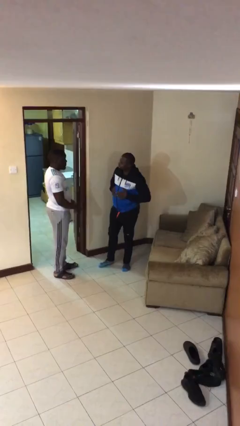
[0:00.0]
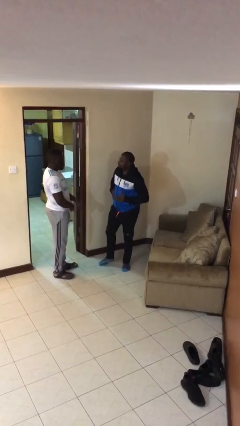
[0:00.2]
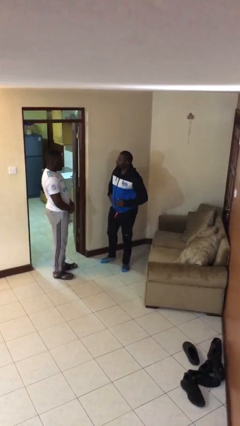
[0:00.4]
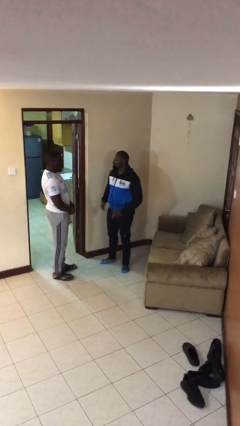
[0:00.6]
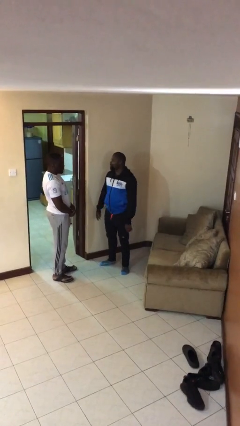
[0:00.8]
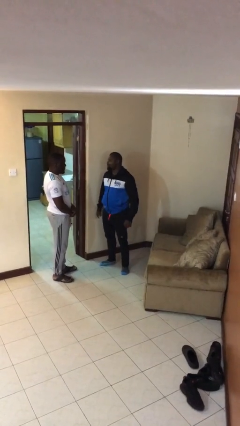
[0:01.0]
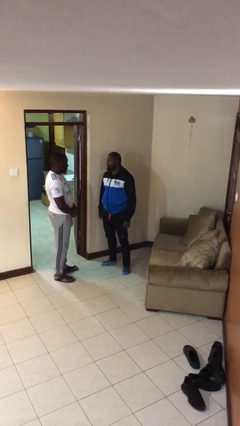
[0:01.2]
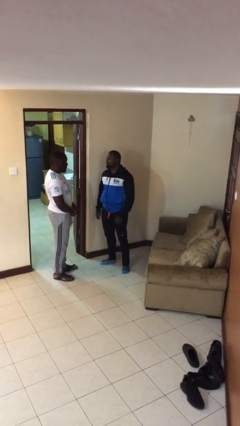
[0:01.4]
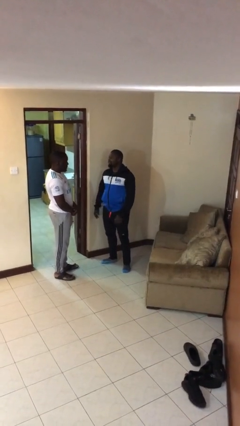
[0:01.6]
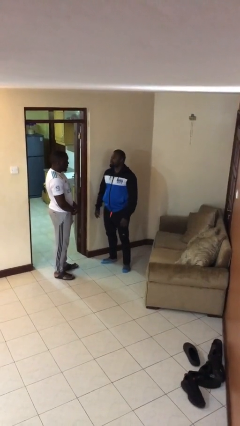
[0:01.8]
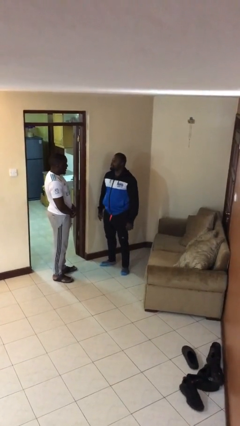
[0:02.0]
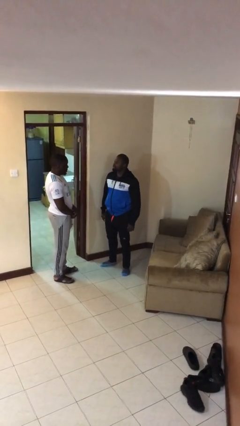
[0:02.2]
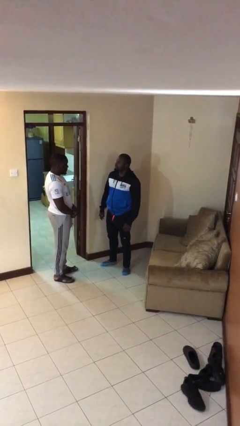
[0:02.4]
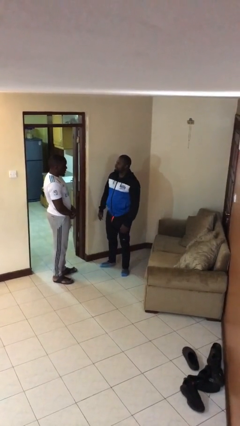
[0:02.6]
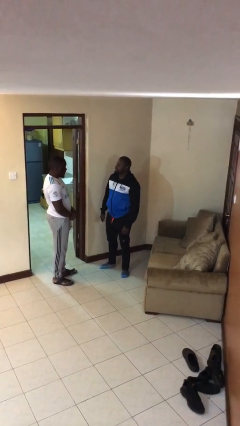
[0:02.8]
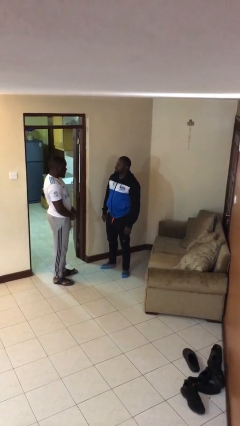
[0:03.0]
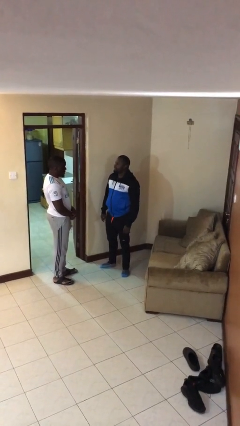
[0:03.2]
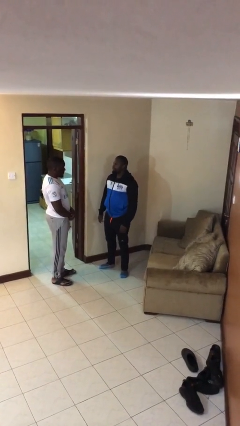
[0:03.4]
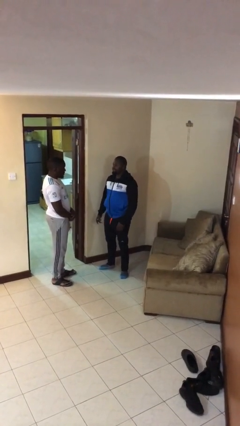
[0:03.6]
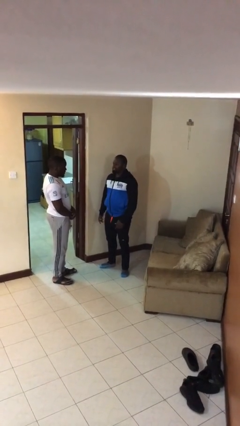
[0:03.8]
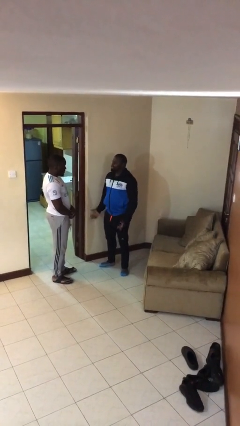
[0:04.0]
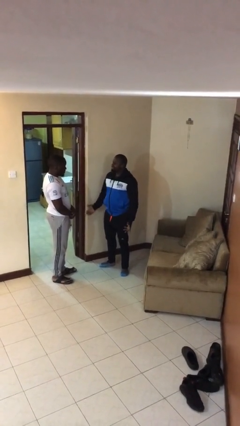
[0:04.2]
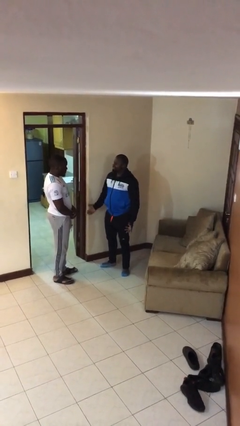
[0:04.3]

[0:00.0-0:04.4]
person talks to person

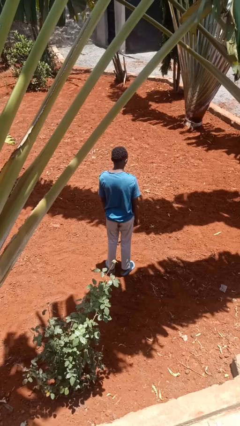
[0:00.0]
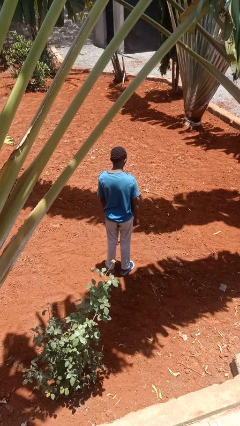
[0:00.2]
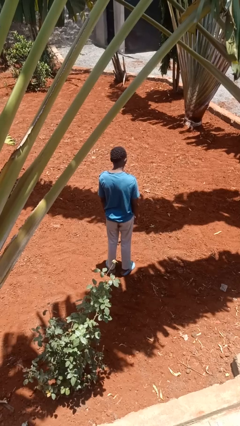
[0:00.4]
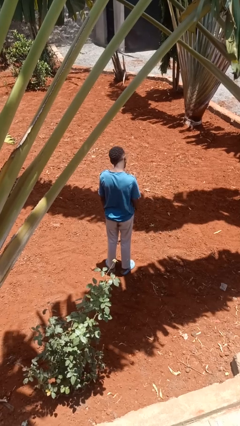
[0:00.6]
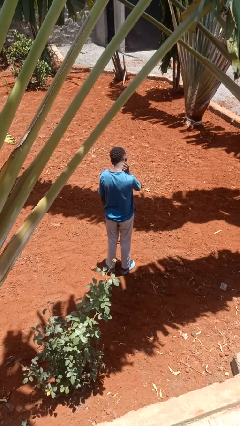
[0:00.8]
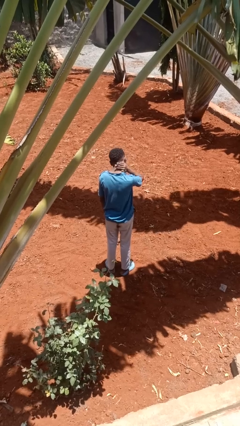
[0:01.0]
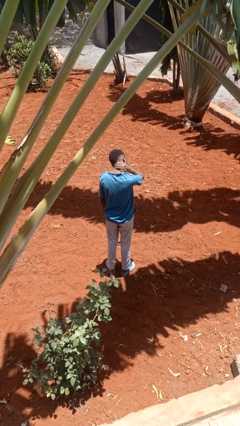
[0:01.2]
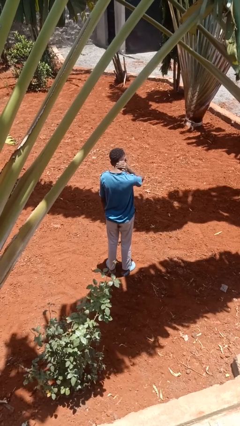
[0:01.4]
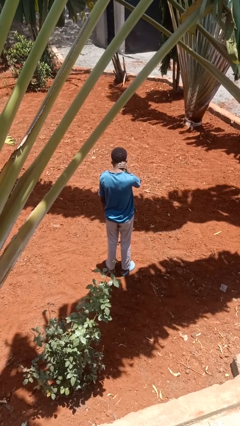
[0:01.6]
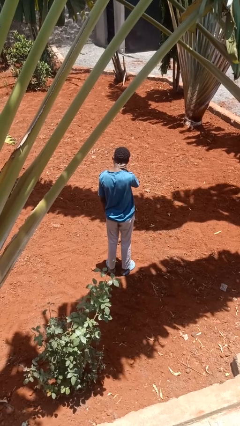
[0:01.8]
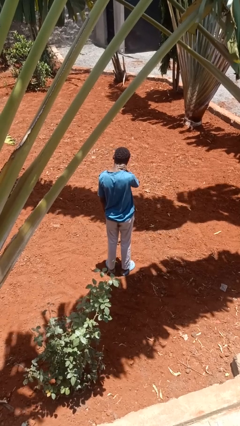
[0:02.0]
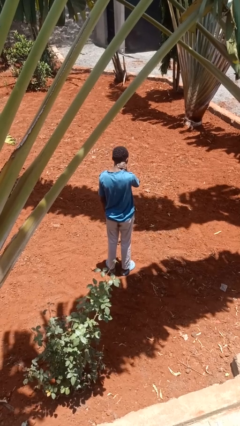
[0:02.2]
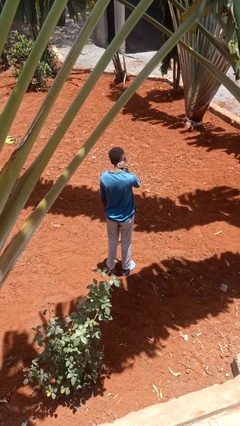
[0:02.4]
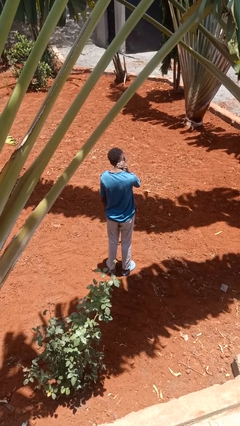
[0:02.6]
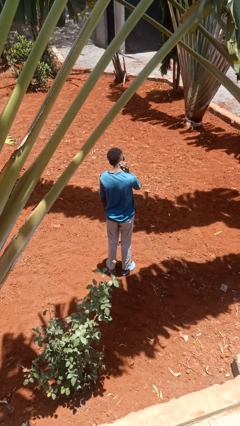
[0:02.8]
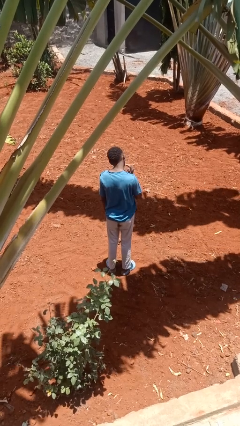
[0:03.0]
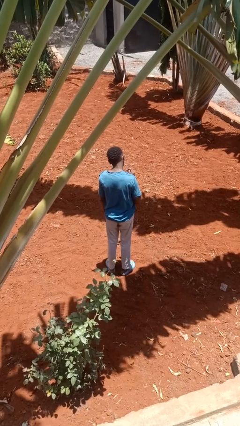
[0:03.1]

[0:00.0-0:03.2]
person rubs neck

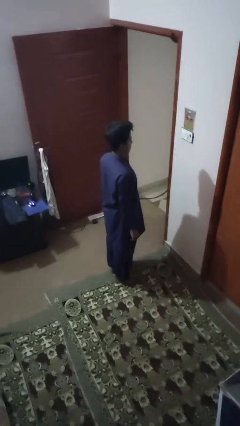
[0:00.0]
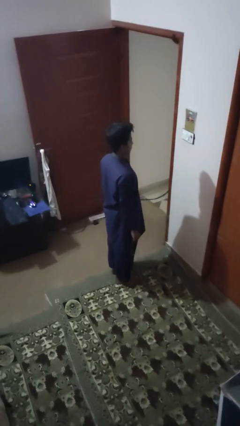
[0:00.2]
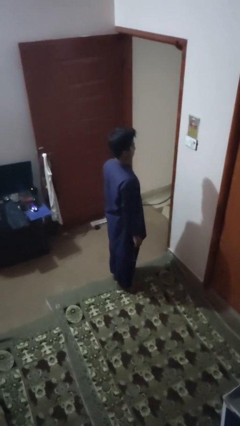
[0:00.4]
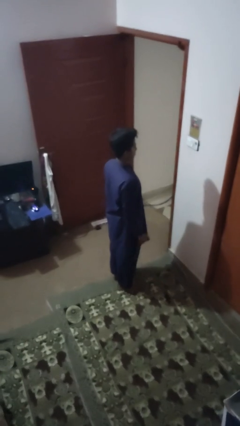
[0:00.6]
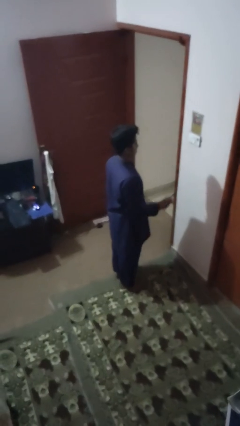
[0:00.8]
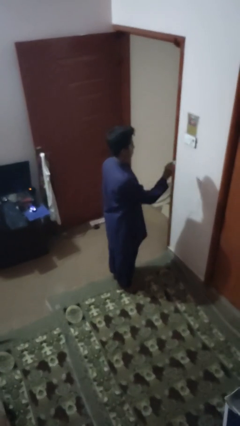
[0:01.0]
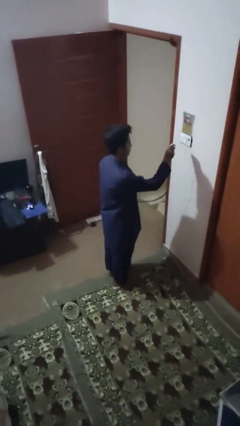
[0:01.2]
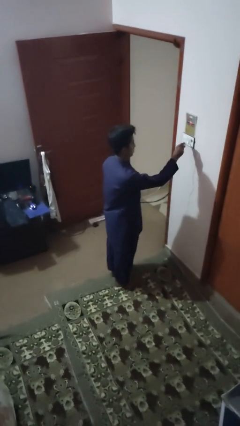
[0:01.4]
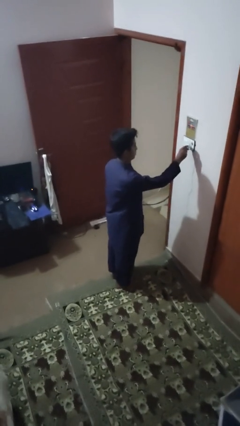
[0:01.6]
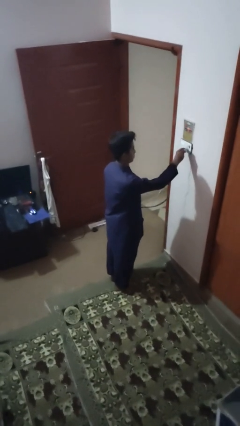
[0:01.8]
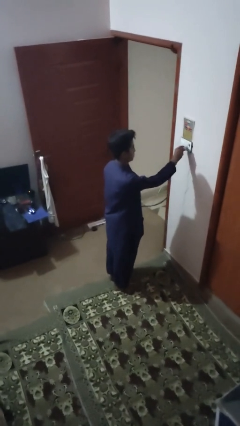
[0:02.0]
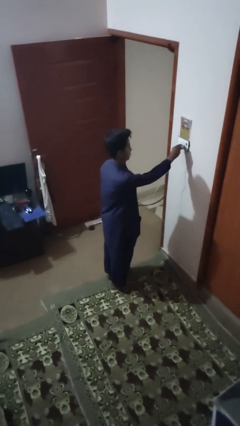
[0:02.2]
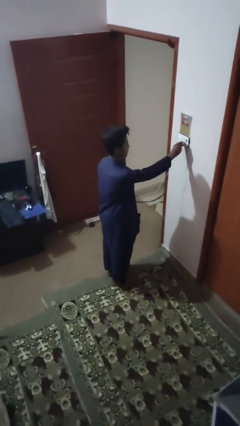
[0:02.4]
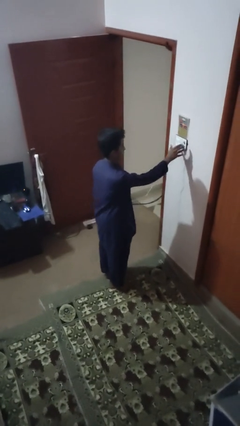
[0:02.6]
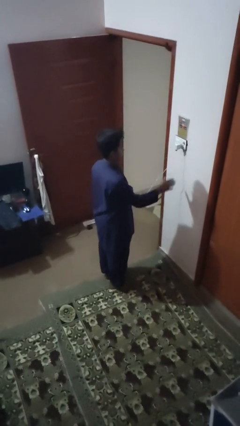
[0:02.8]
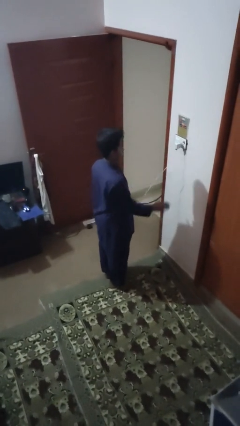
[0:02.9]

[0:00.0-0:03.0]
person plugs into electrical socket

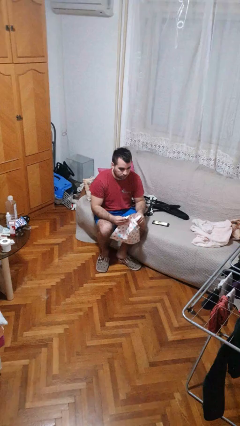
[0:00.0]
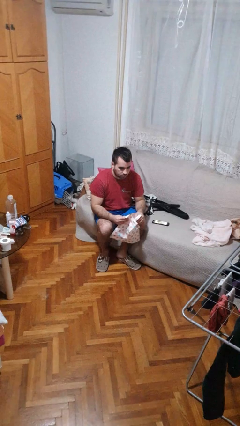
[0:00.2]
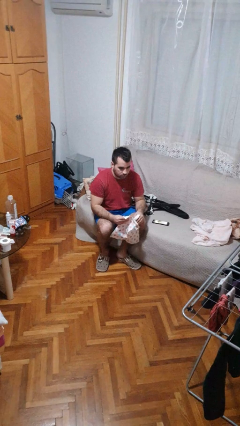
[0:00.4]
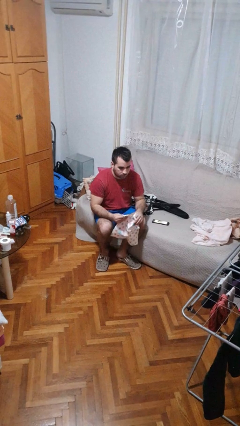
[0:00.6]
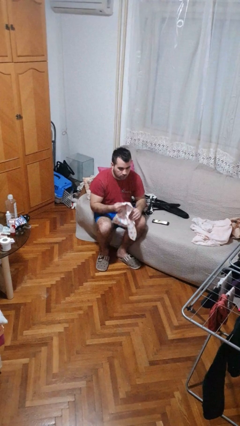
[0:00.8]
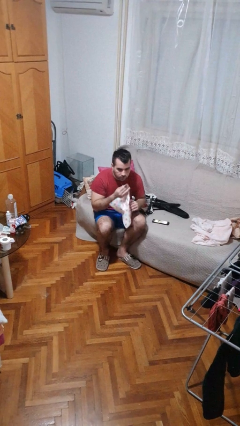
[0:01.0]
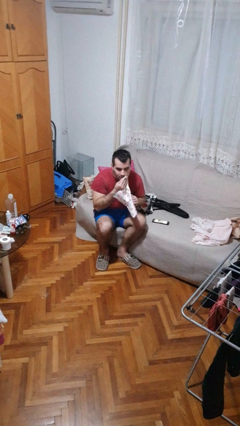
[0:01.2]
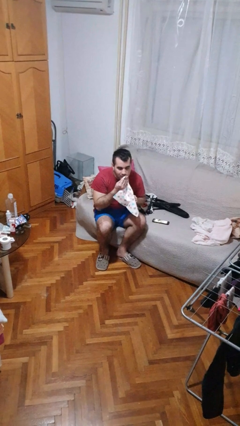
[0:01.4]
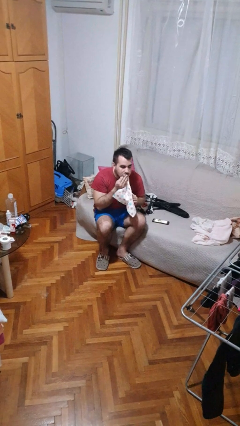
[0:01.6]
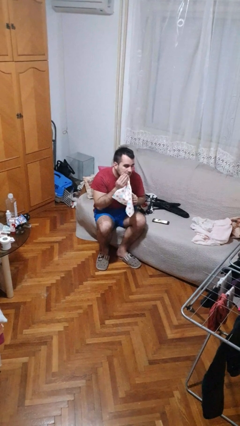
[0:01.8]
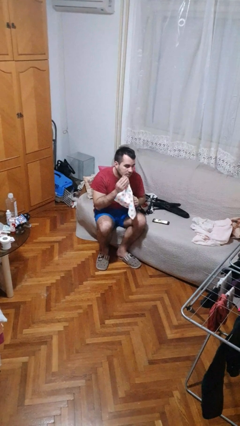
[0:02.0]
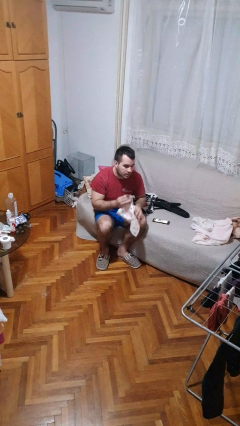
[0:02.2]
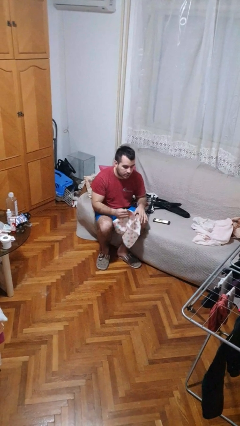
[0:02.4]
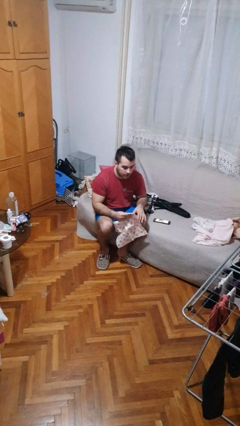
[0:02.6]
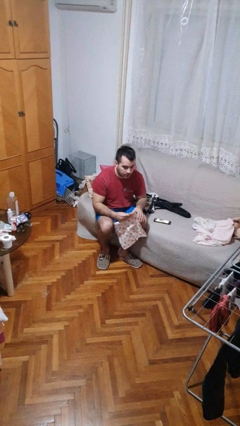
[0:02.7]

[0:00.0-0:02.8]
person wipes mouth with napkin

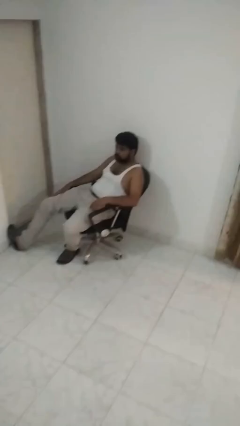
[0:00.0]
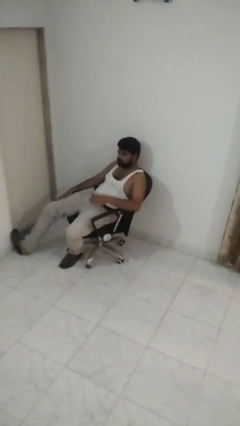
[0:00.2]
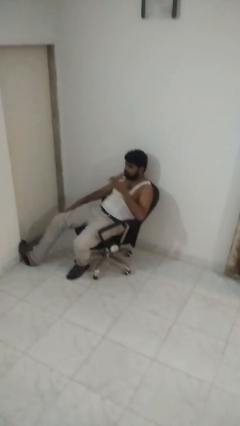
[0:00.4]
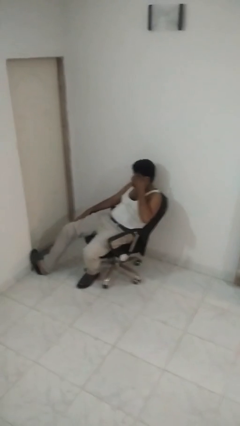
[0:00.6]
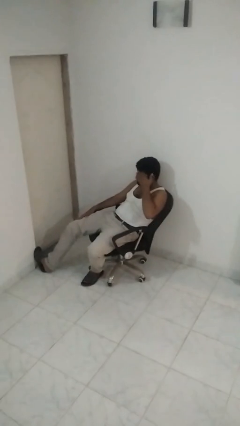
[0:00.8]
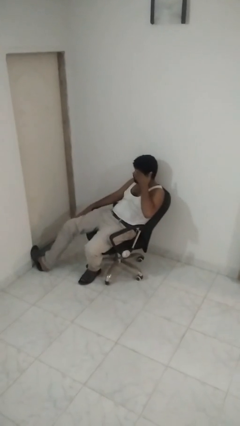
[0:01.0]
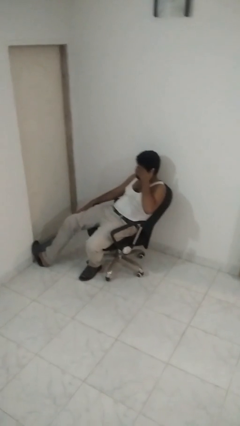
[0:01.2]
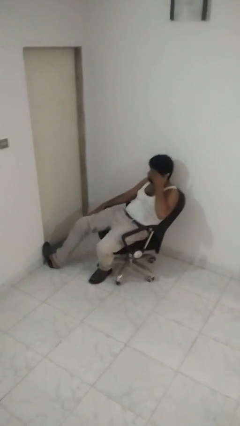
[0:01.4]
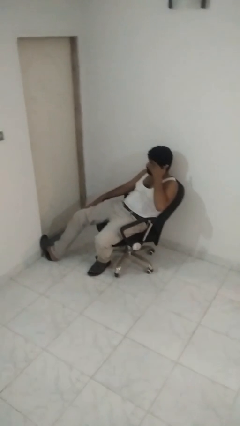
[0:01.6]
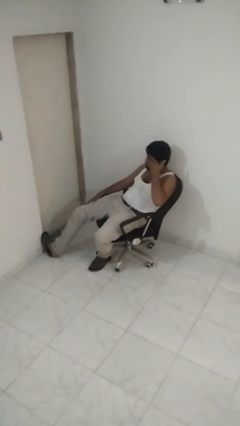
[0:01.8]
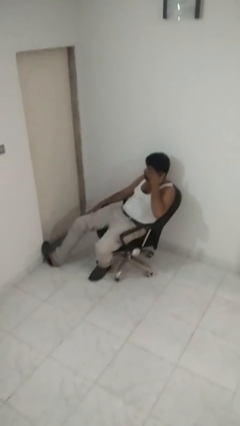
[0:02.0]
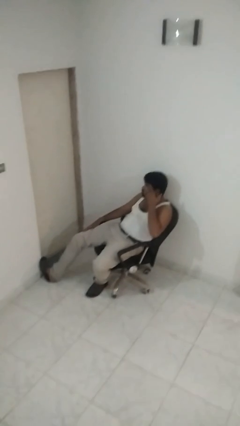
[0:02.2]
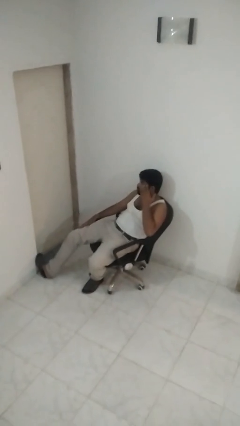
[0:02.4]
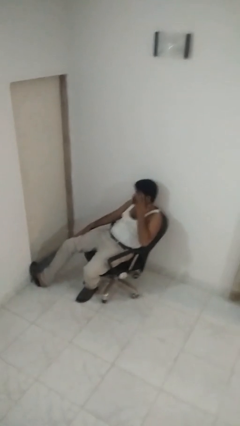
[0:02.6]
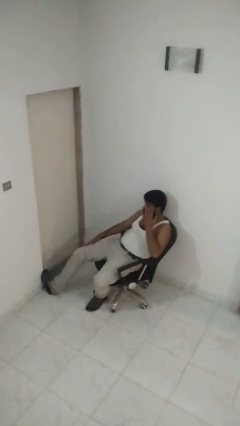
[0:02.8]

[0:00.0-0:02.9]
person scratches face

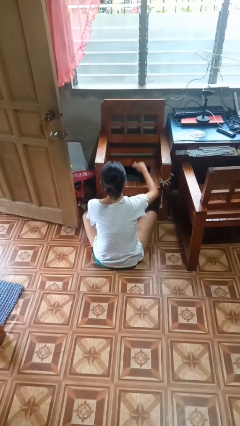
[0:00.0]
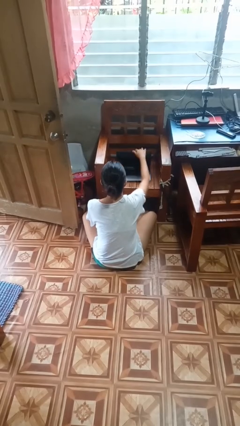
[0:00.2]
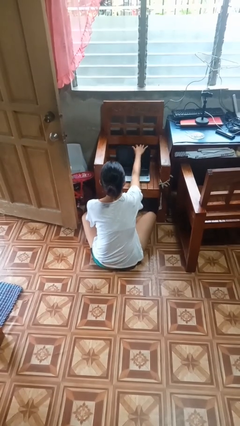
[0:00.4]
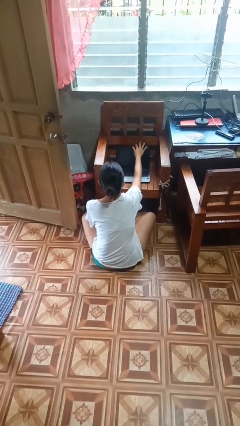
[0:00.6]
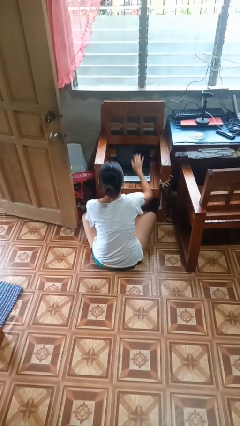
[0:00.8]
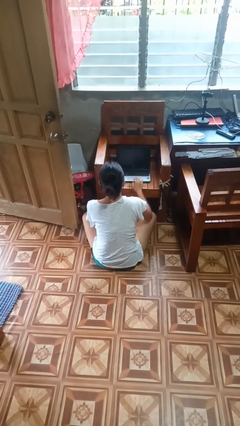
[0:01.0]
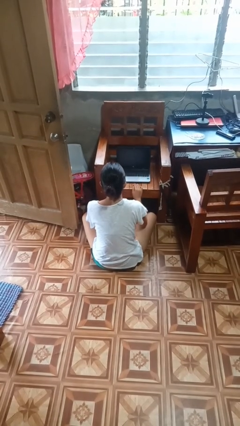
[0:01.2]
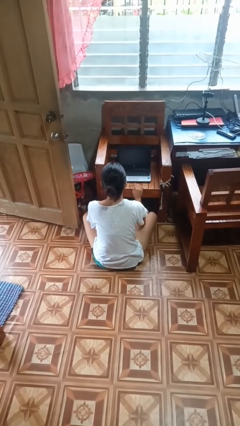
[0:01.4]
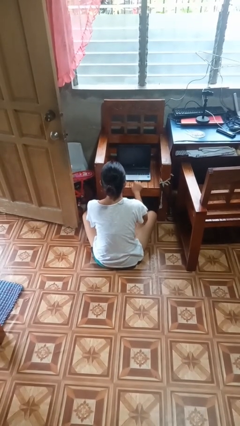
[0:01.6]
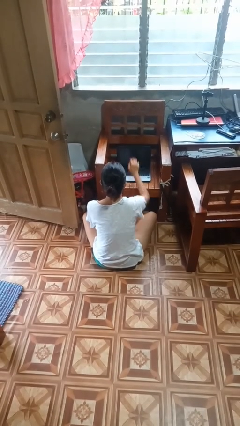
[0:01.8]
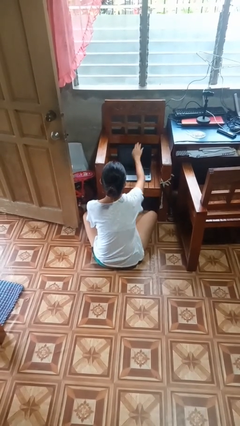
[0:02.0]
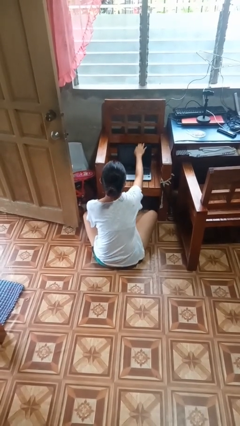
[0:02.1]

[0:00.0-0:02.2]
person opens laptop
